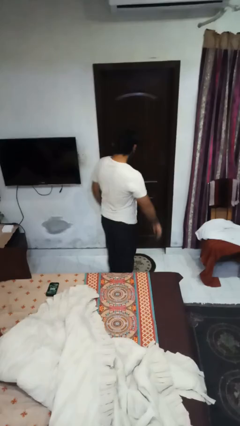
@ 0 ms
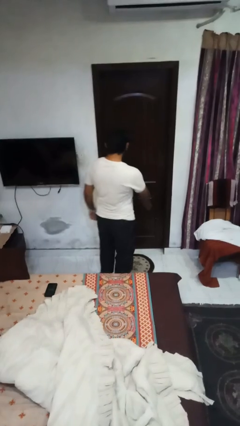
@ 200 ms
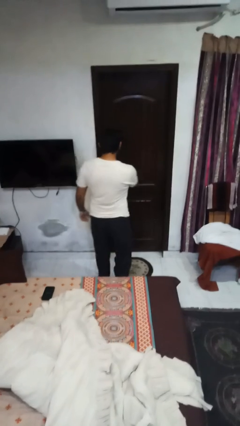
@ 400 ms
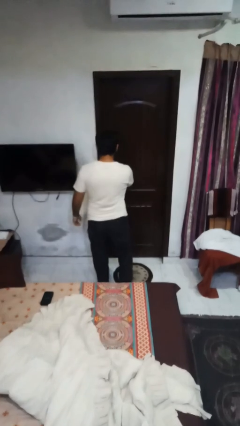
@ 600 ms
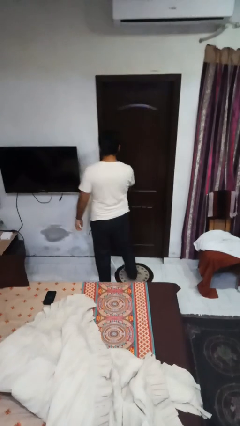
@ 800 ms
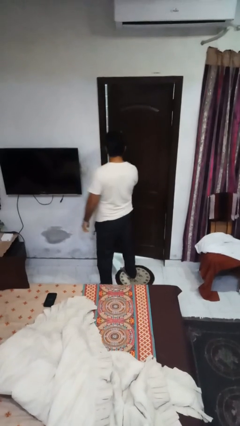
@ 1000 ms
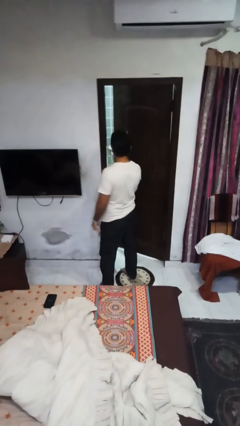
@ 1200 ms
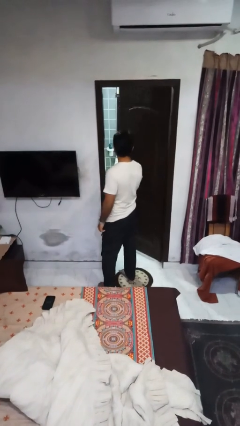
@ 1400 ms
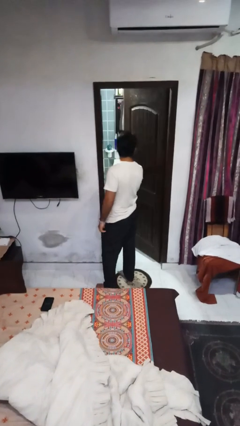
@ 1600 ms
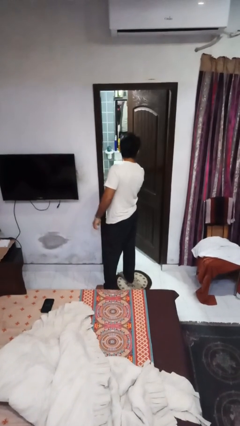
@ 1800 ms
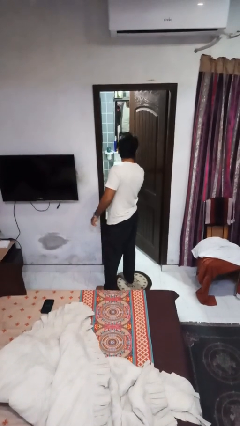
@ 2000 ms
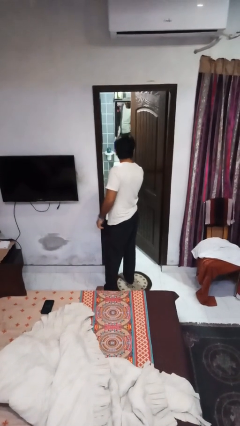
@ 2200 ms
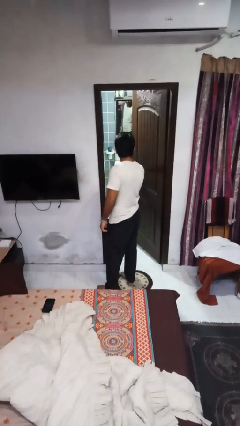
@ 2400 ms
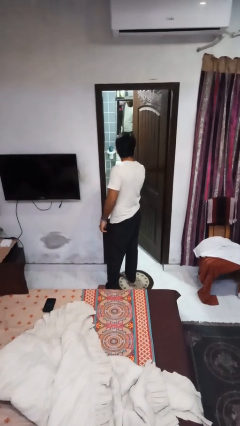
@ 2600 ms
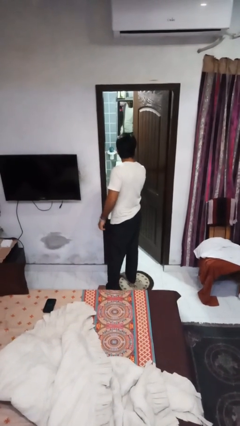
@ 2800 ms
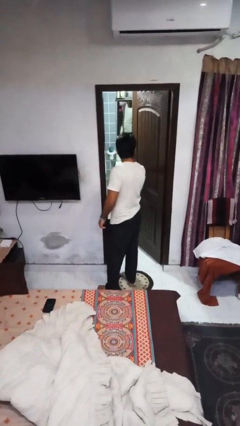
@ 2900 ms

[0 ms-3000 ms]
person opens facility door

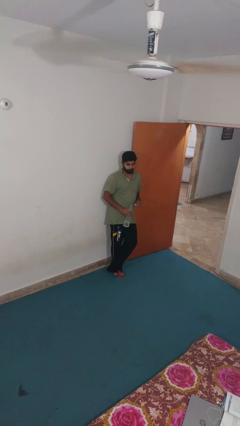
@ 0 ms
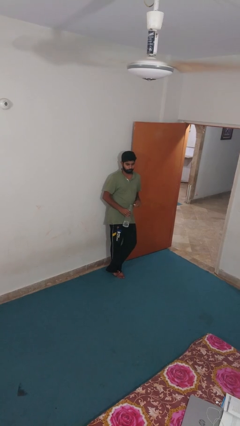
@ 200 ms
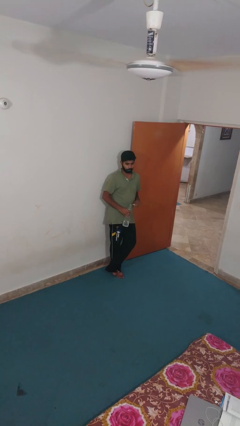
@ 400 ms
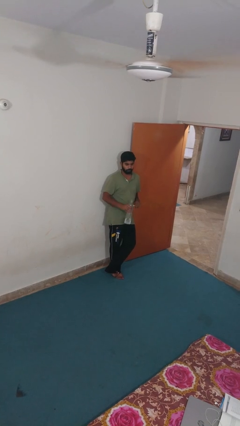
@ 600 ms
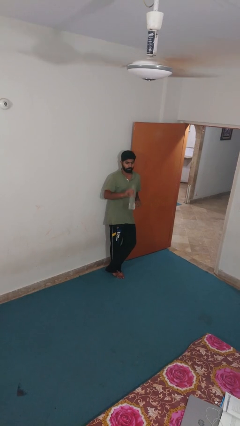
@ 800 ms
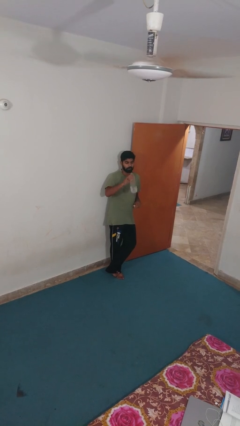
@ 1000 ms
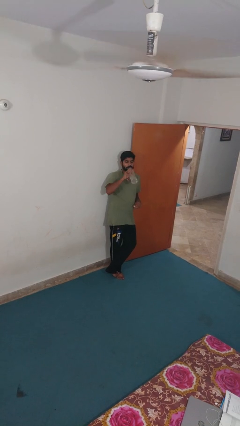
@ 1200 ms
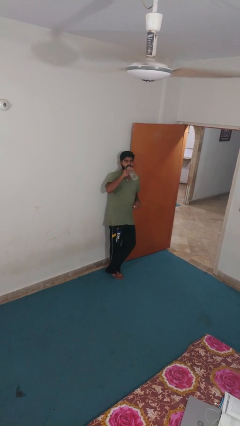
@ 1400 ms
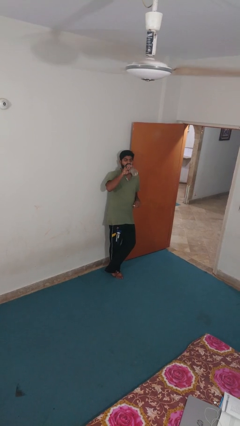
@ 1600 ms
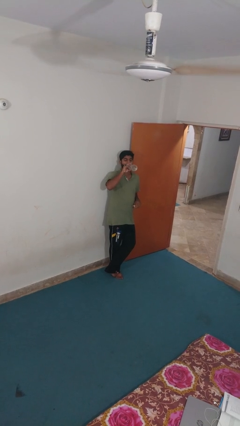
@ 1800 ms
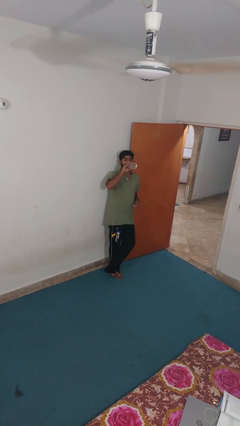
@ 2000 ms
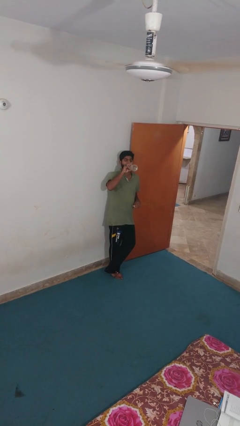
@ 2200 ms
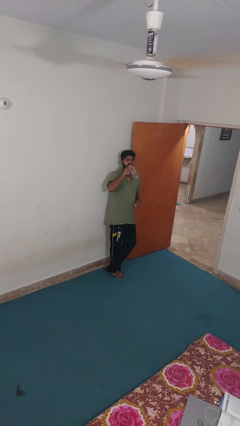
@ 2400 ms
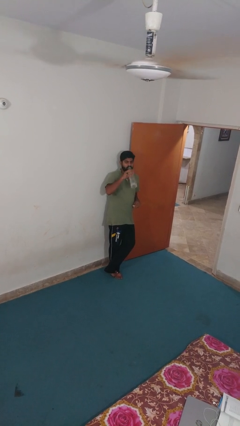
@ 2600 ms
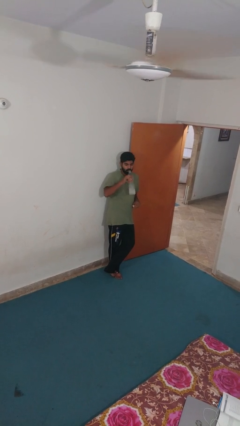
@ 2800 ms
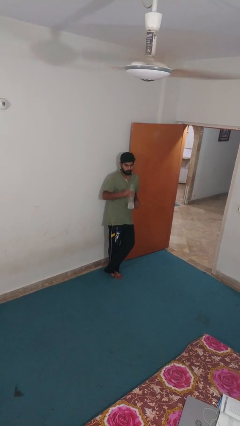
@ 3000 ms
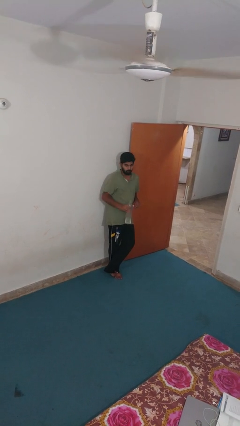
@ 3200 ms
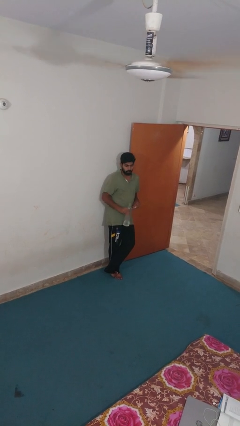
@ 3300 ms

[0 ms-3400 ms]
person drinks from bottle

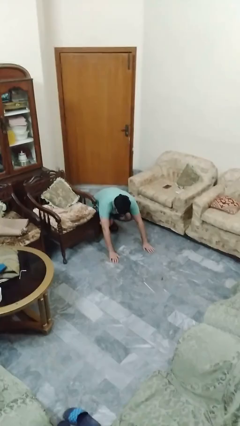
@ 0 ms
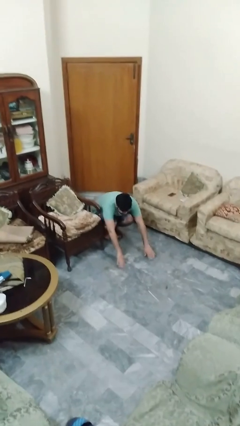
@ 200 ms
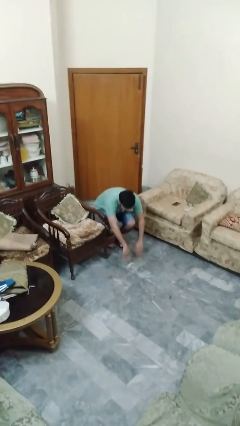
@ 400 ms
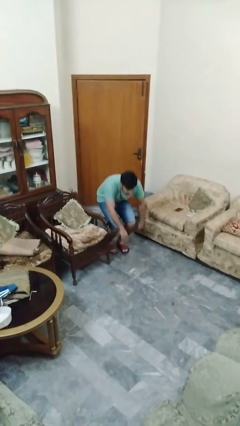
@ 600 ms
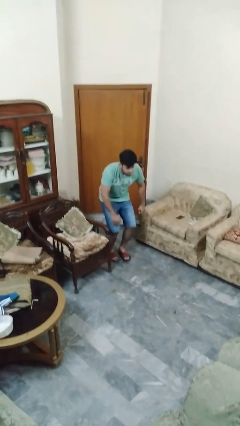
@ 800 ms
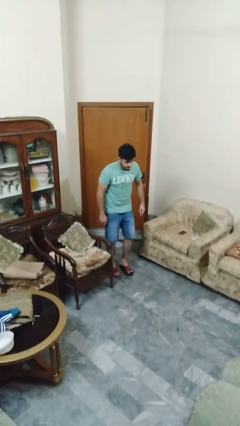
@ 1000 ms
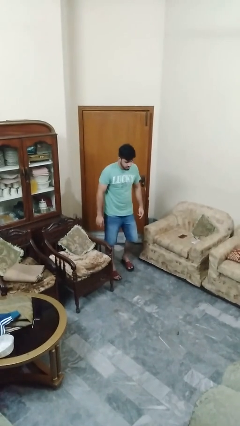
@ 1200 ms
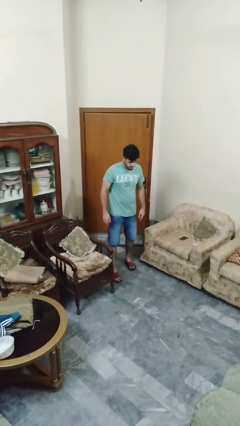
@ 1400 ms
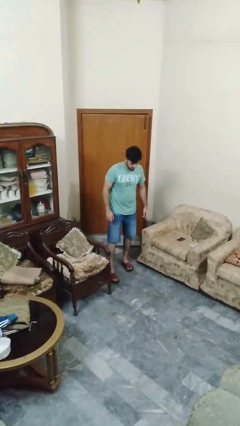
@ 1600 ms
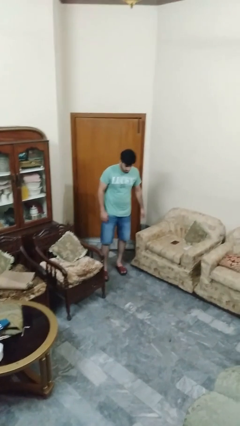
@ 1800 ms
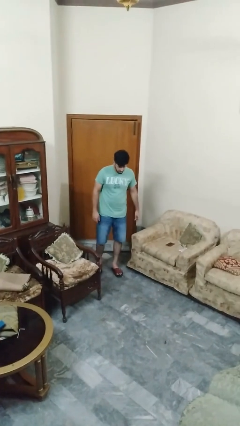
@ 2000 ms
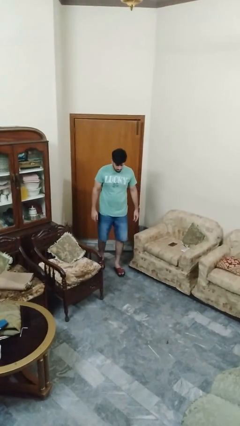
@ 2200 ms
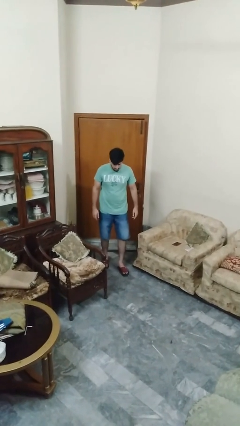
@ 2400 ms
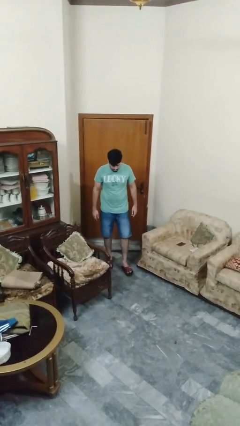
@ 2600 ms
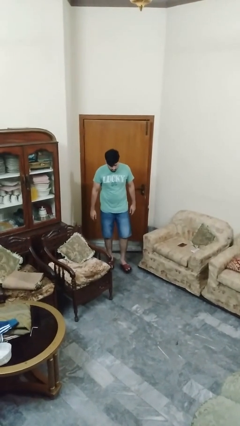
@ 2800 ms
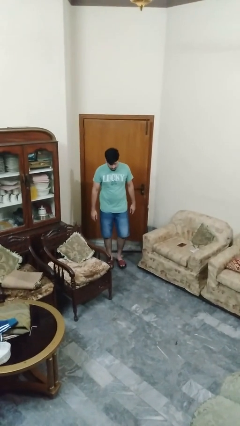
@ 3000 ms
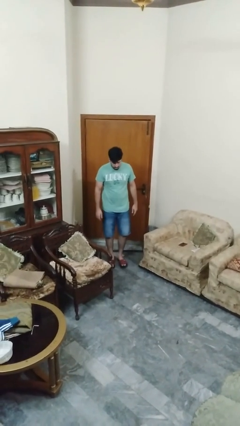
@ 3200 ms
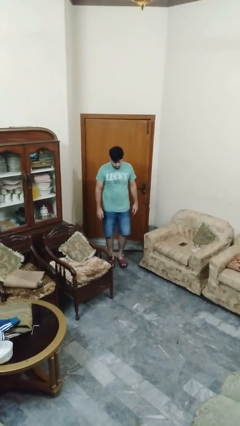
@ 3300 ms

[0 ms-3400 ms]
person stands up from floor

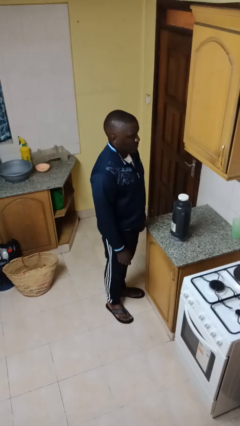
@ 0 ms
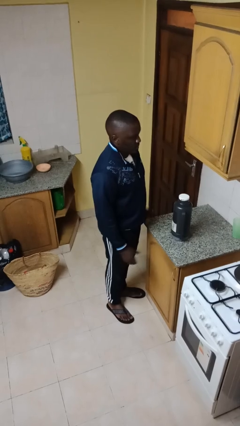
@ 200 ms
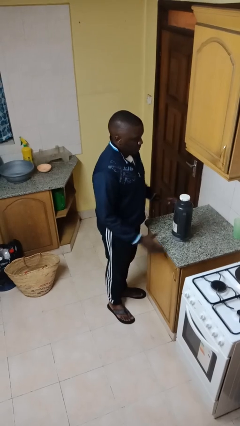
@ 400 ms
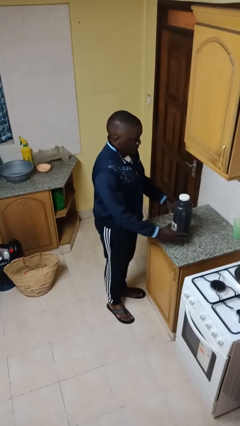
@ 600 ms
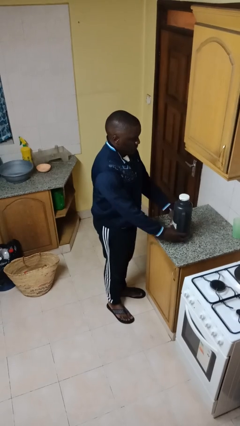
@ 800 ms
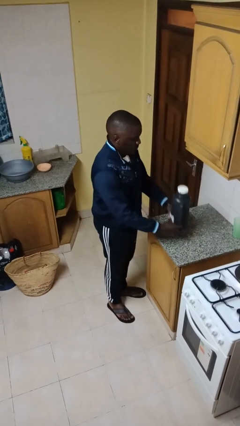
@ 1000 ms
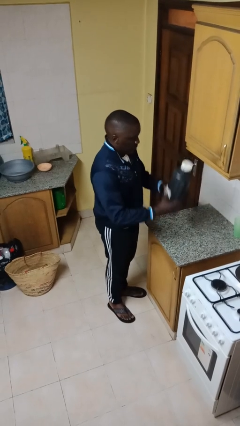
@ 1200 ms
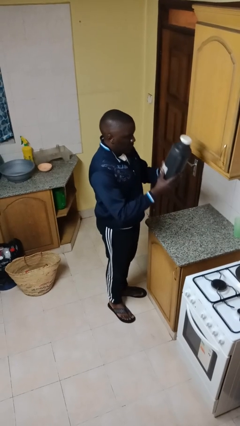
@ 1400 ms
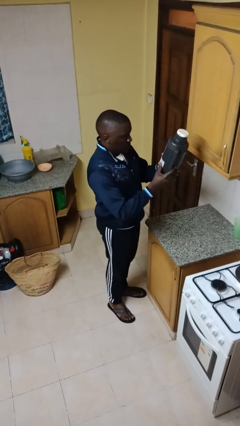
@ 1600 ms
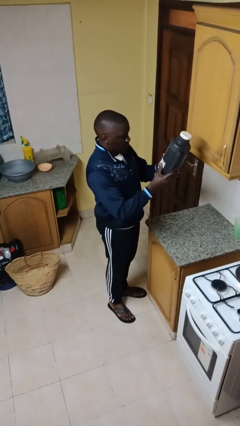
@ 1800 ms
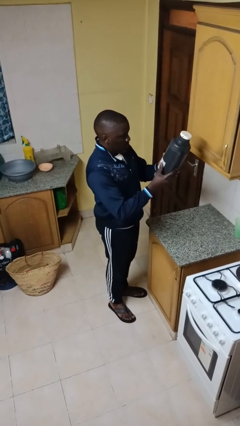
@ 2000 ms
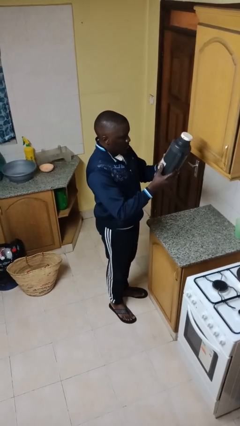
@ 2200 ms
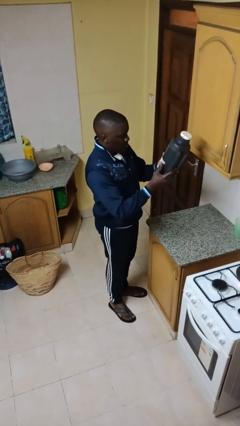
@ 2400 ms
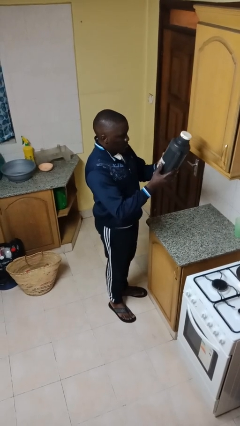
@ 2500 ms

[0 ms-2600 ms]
person picks up object from countertop

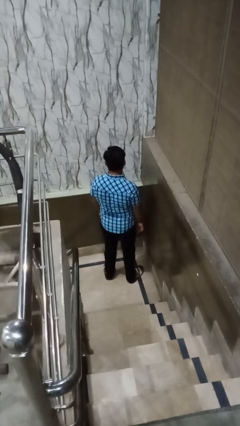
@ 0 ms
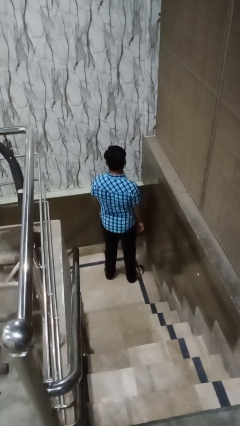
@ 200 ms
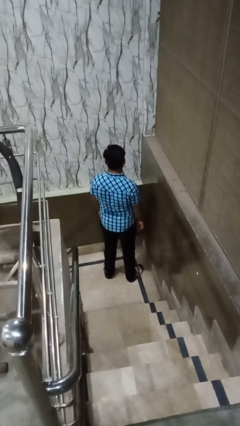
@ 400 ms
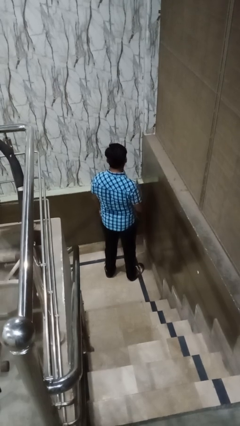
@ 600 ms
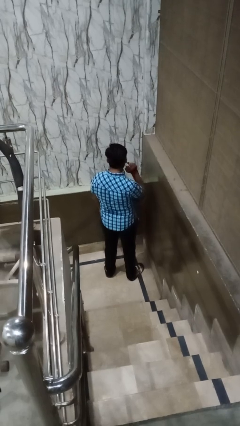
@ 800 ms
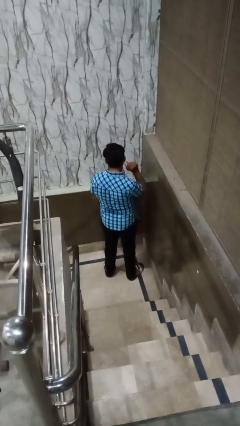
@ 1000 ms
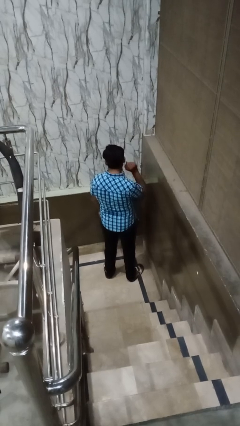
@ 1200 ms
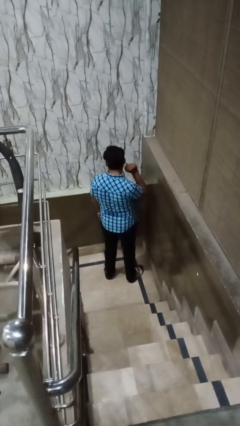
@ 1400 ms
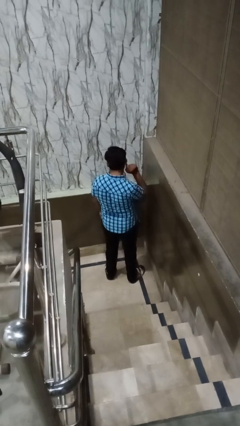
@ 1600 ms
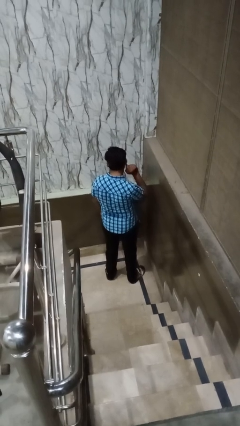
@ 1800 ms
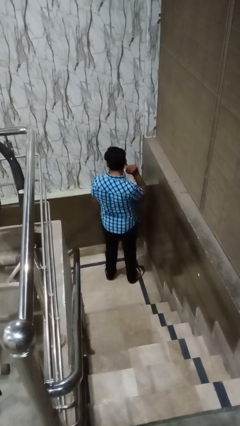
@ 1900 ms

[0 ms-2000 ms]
person touches earlobe

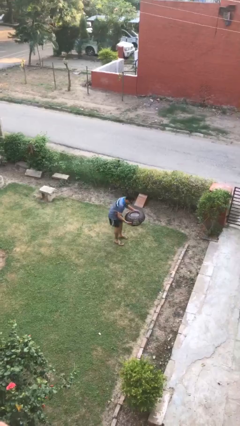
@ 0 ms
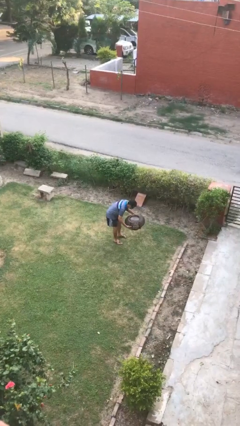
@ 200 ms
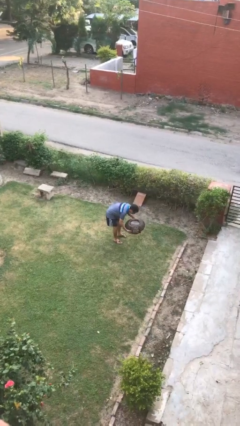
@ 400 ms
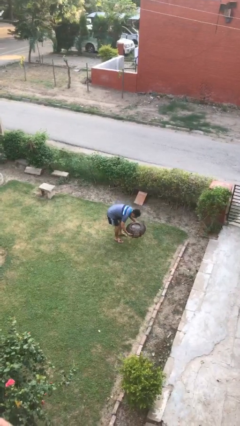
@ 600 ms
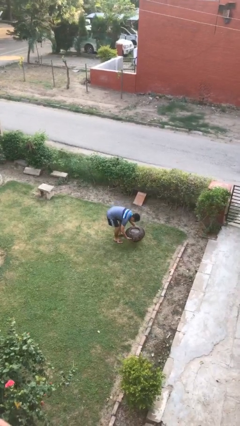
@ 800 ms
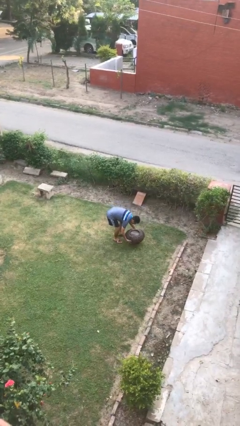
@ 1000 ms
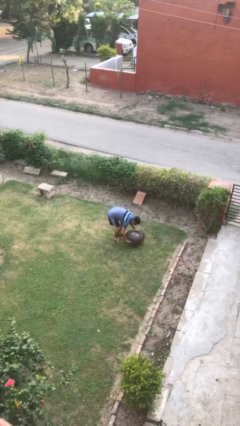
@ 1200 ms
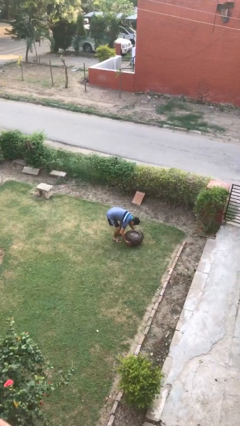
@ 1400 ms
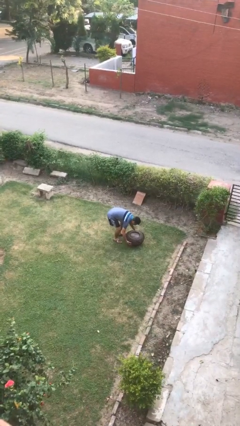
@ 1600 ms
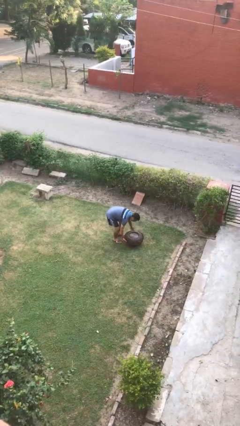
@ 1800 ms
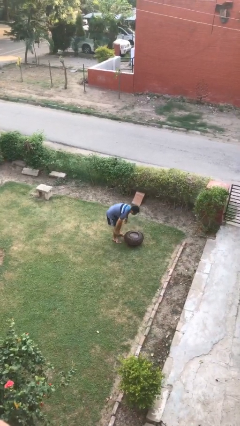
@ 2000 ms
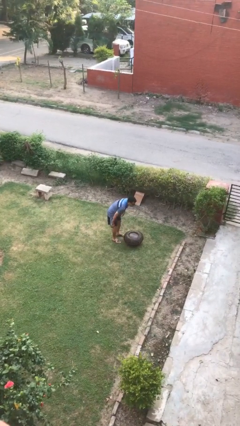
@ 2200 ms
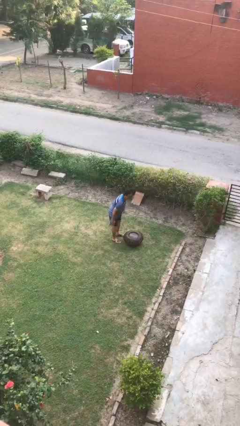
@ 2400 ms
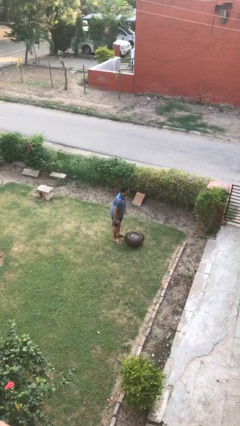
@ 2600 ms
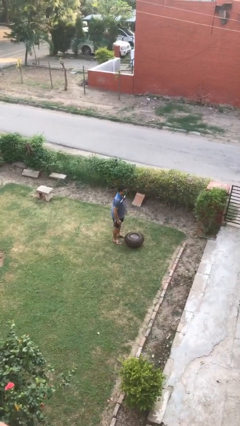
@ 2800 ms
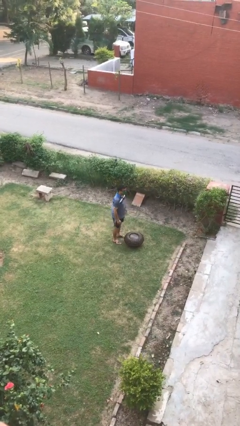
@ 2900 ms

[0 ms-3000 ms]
person puts down object on floor
